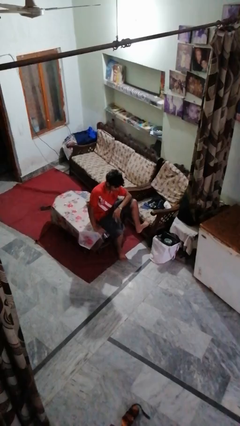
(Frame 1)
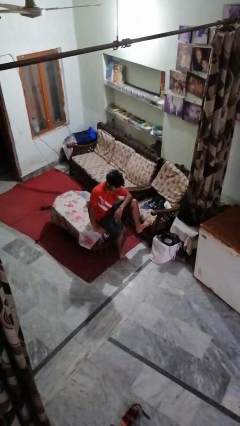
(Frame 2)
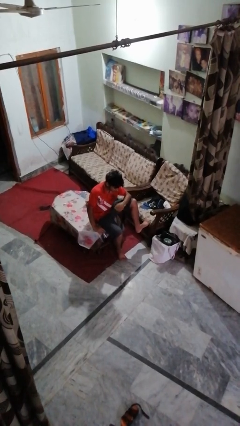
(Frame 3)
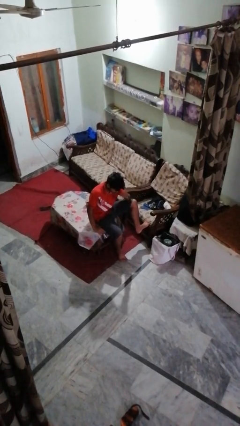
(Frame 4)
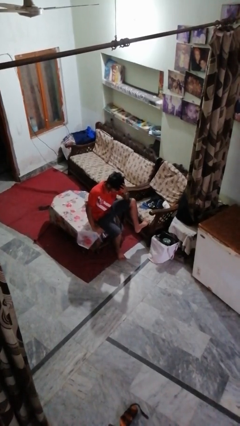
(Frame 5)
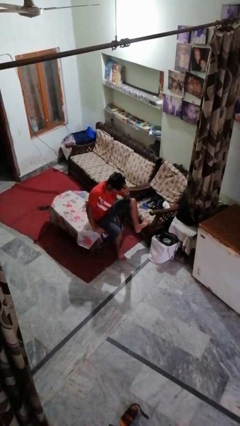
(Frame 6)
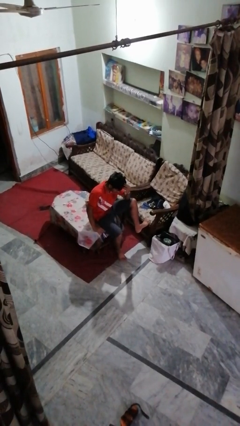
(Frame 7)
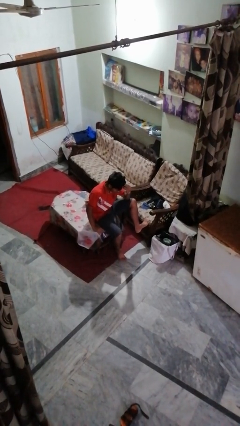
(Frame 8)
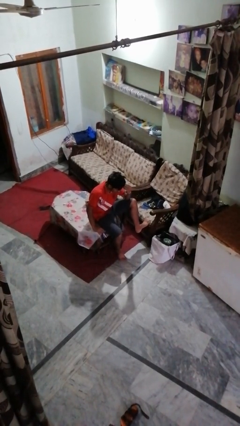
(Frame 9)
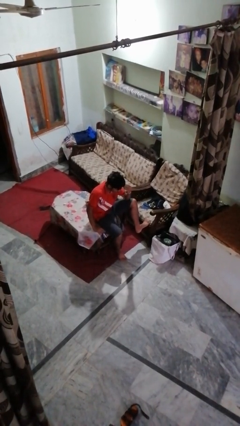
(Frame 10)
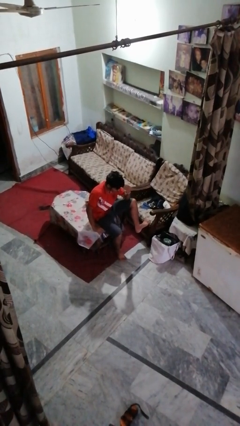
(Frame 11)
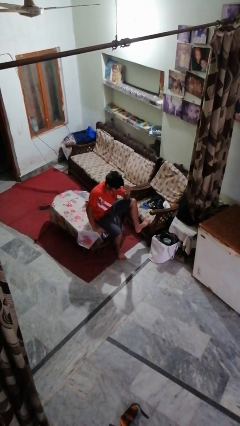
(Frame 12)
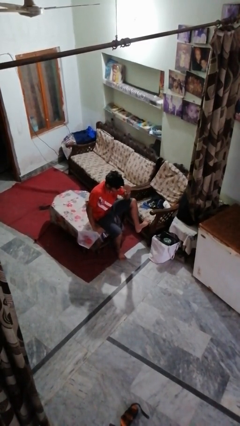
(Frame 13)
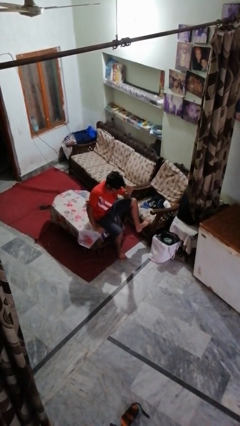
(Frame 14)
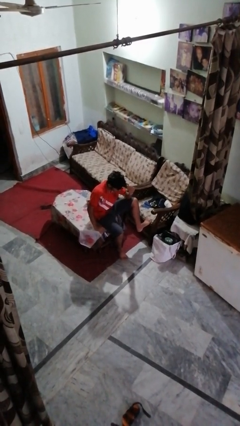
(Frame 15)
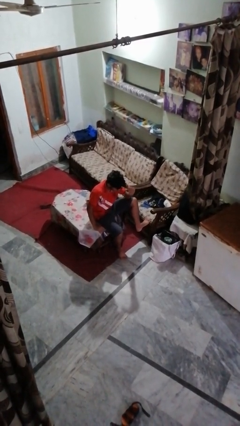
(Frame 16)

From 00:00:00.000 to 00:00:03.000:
person strokes hair

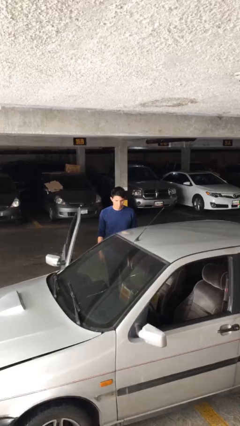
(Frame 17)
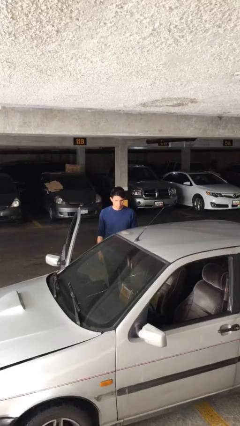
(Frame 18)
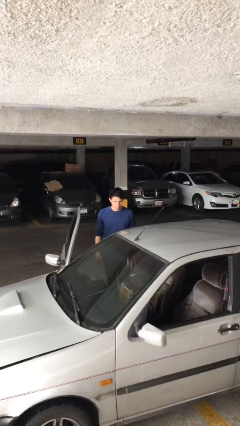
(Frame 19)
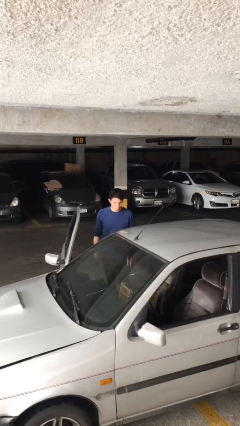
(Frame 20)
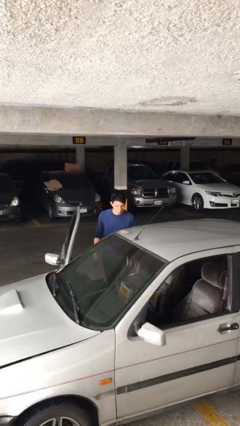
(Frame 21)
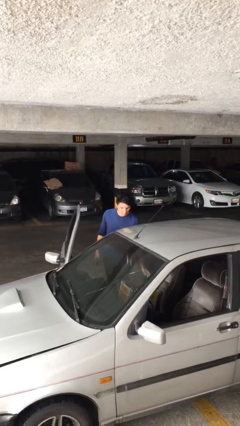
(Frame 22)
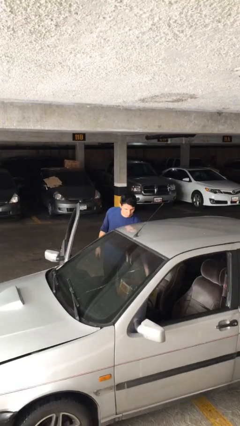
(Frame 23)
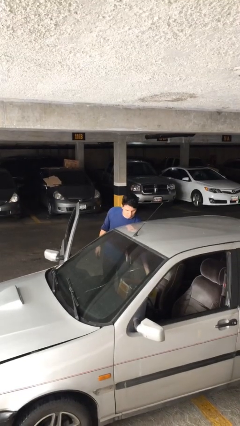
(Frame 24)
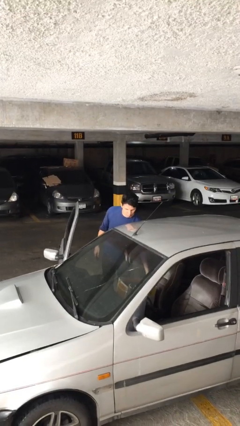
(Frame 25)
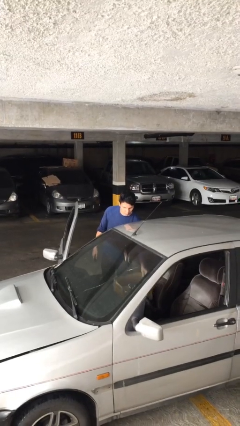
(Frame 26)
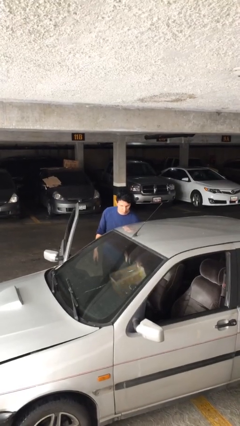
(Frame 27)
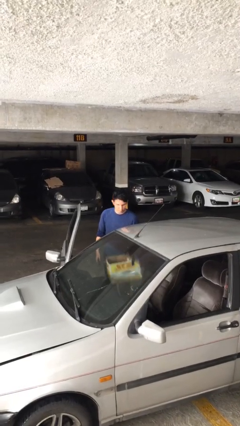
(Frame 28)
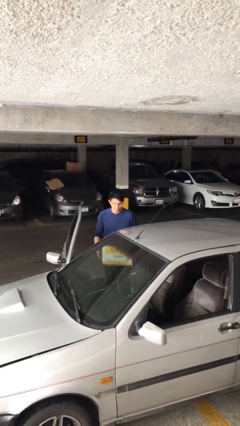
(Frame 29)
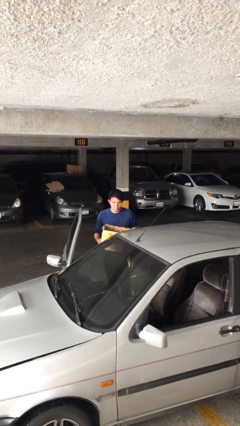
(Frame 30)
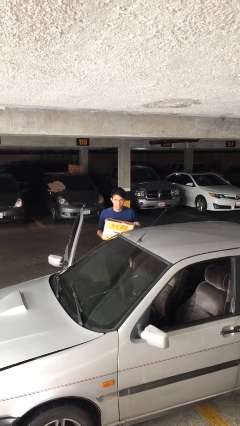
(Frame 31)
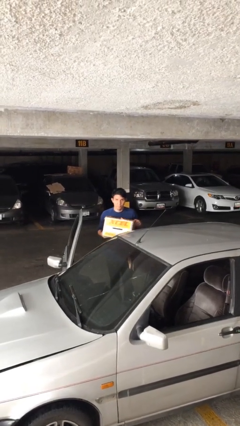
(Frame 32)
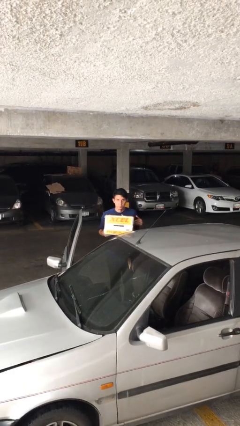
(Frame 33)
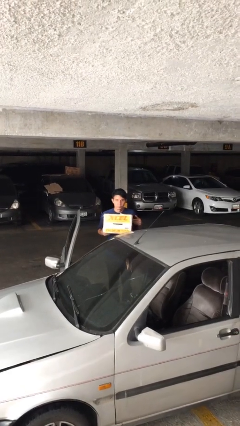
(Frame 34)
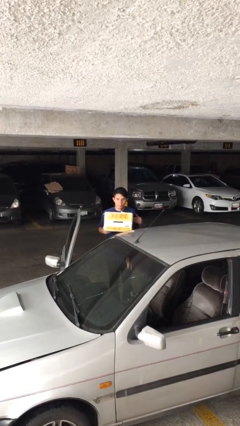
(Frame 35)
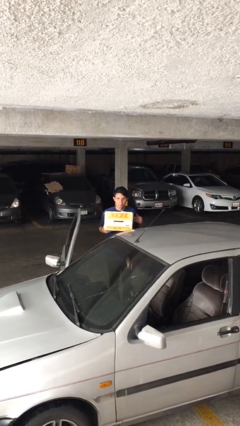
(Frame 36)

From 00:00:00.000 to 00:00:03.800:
person unloads car

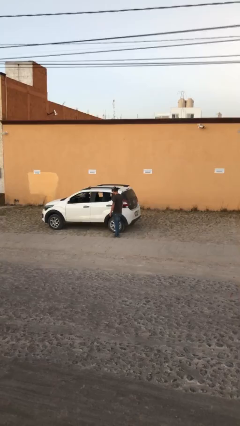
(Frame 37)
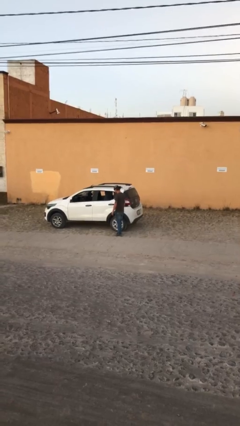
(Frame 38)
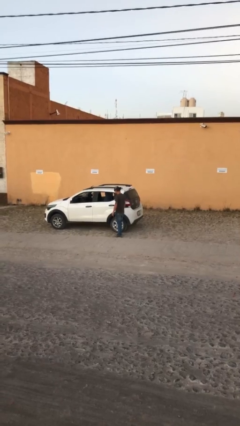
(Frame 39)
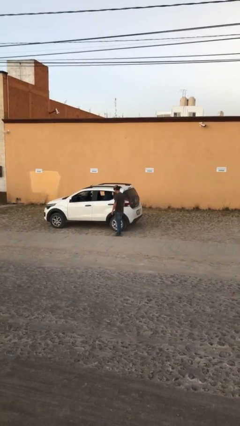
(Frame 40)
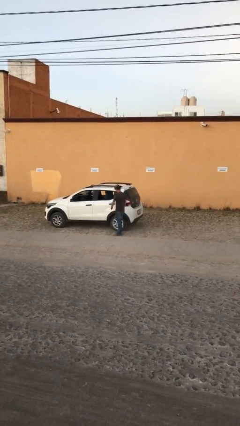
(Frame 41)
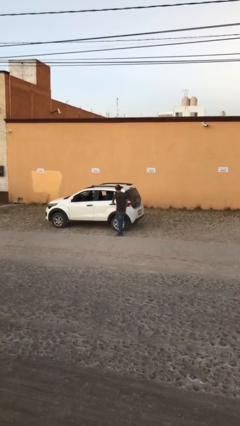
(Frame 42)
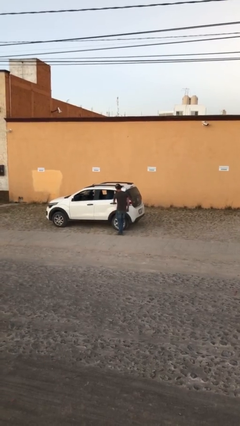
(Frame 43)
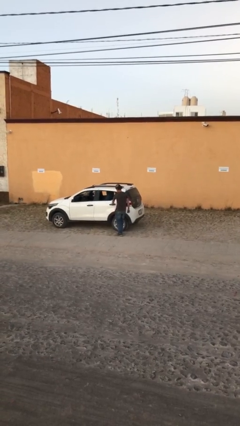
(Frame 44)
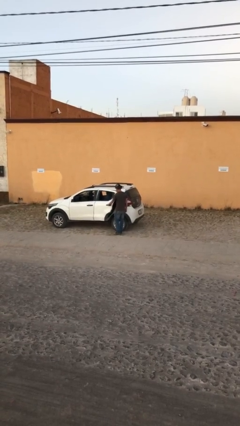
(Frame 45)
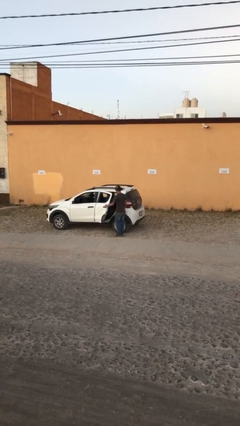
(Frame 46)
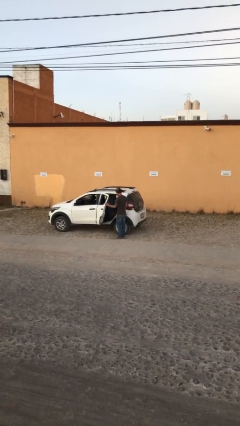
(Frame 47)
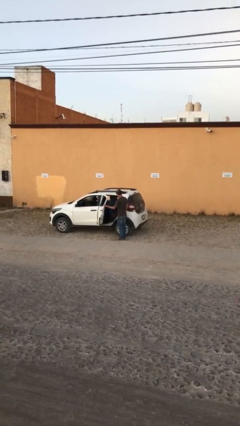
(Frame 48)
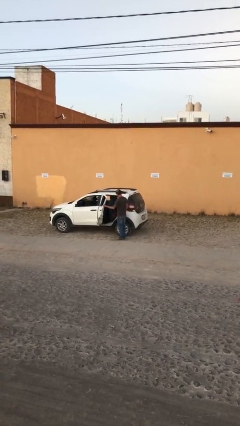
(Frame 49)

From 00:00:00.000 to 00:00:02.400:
person opens car door

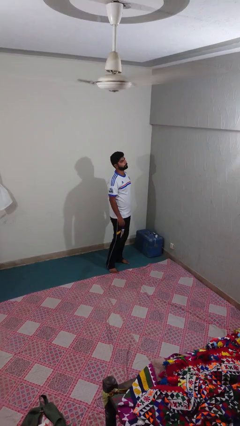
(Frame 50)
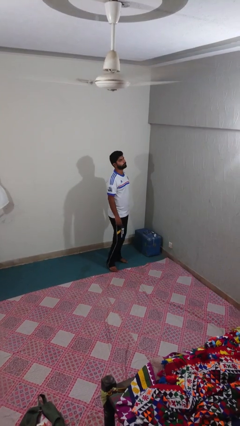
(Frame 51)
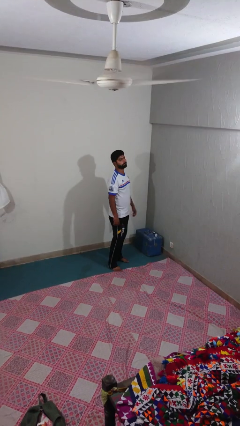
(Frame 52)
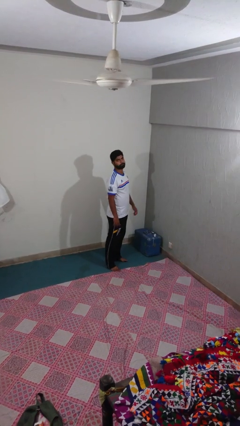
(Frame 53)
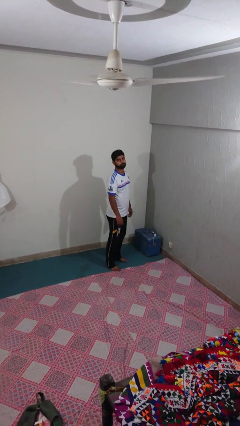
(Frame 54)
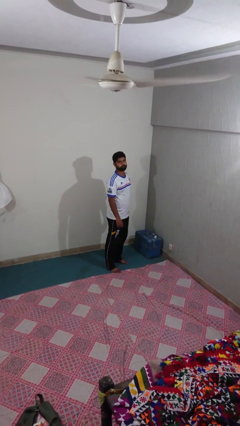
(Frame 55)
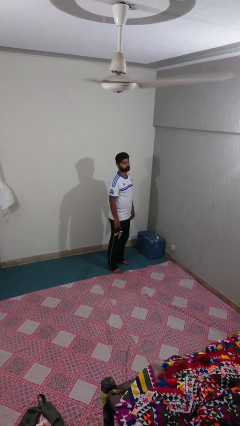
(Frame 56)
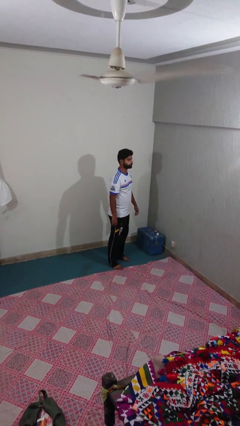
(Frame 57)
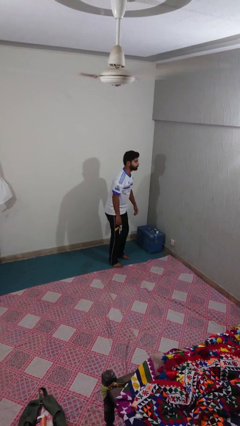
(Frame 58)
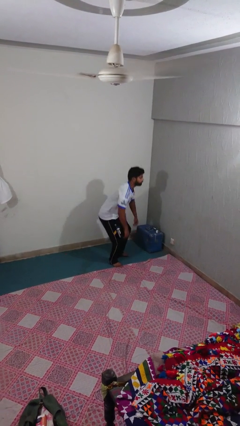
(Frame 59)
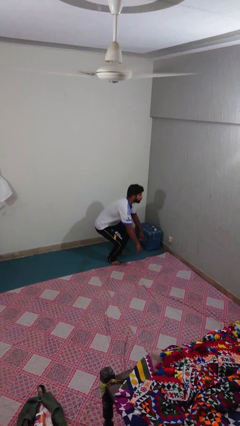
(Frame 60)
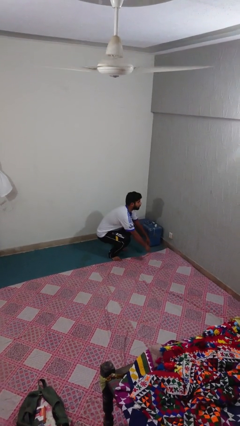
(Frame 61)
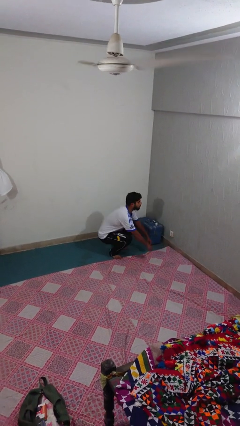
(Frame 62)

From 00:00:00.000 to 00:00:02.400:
person squats

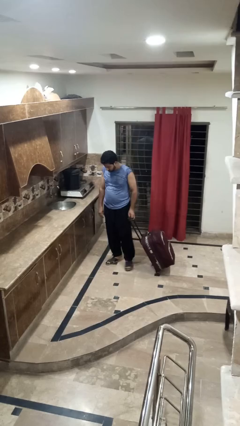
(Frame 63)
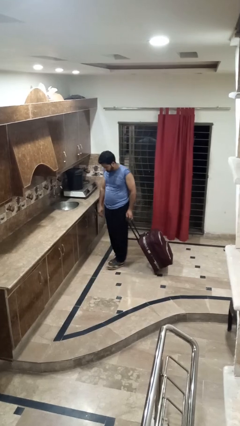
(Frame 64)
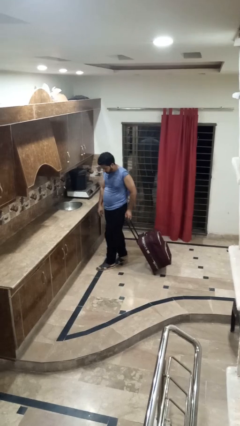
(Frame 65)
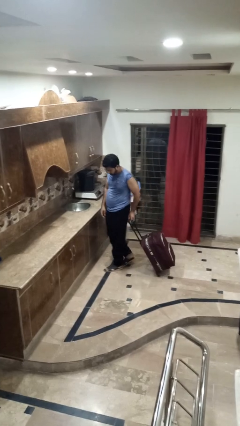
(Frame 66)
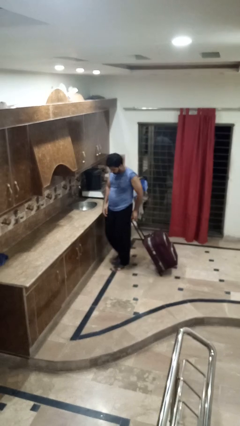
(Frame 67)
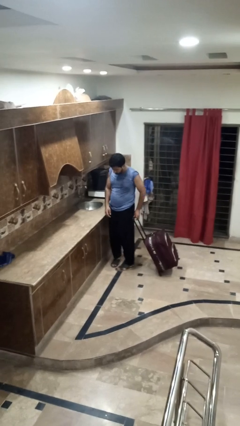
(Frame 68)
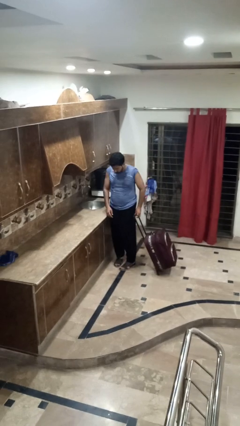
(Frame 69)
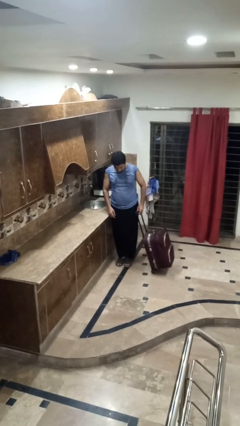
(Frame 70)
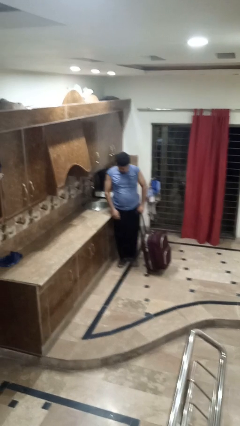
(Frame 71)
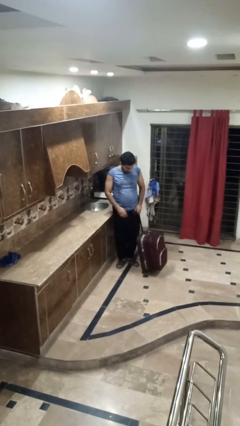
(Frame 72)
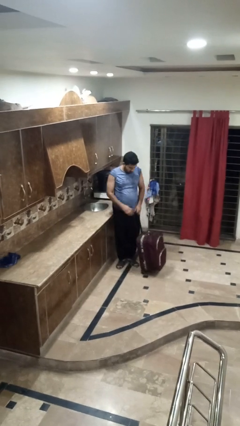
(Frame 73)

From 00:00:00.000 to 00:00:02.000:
person pulls wheeled cart

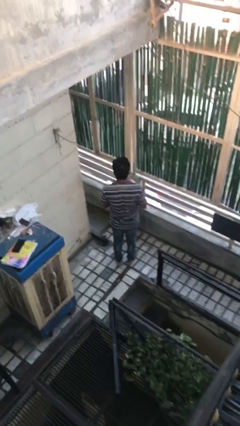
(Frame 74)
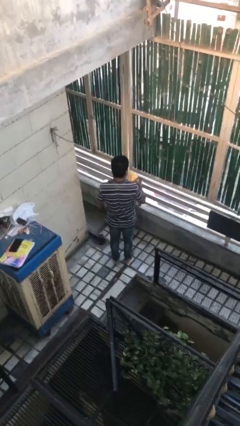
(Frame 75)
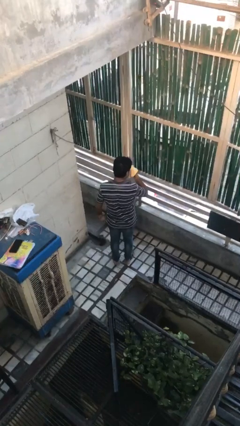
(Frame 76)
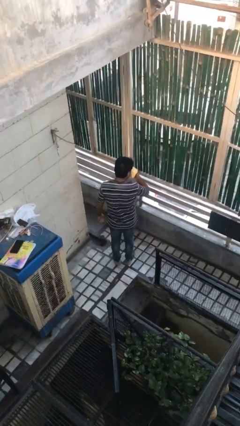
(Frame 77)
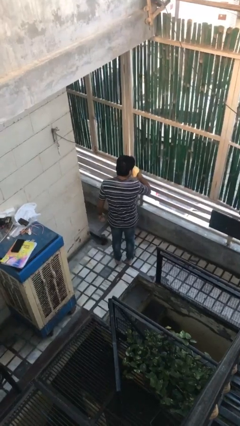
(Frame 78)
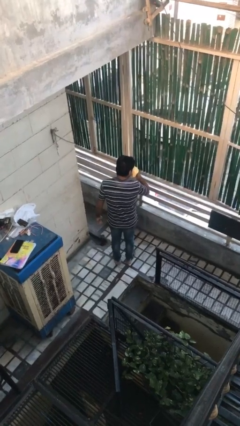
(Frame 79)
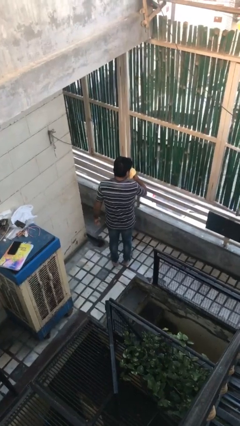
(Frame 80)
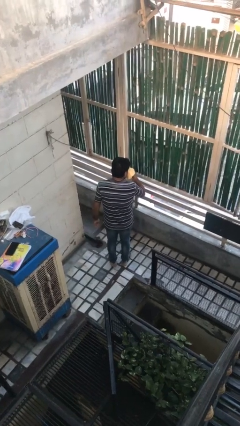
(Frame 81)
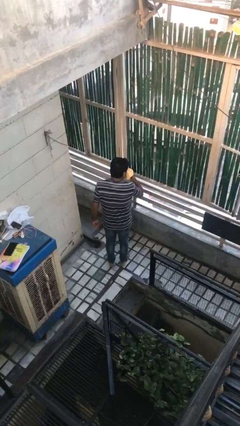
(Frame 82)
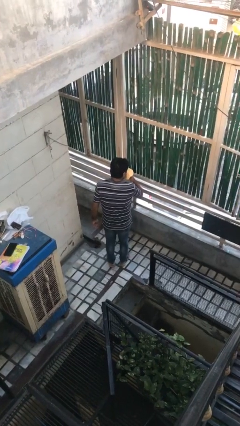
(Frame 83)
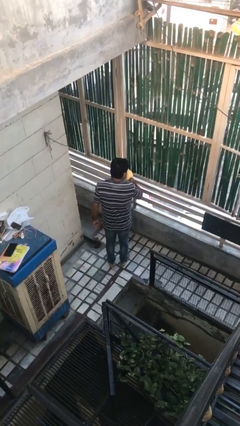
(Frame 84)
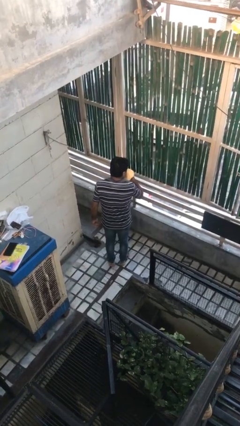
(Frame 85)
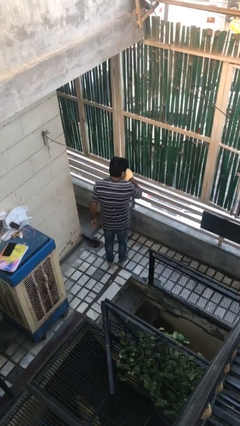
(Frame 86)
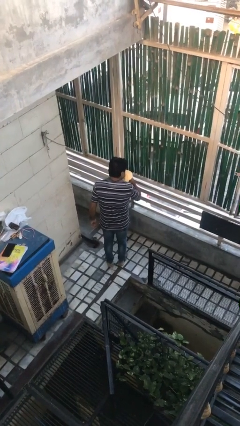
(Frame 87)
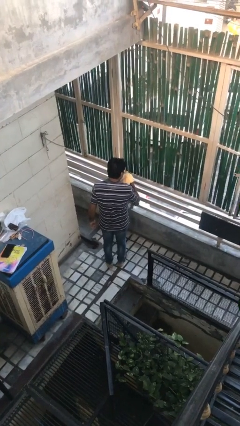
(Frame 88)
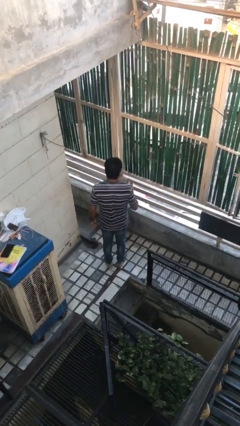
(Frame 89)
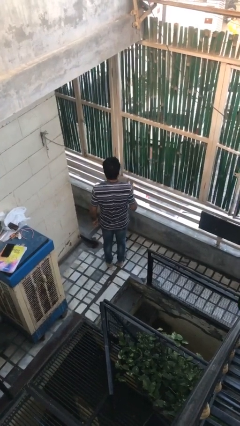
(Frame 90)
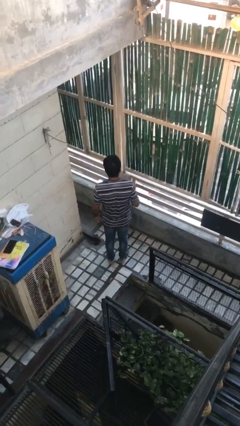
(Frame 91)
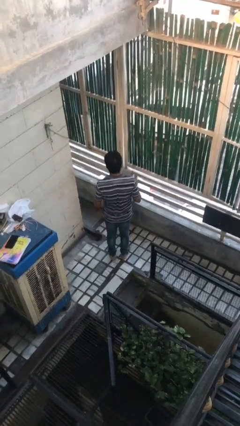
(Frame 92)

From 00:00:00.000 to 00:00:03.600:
person blows nose
